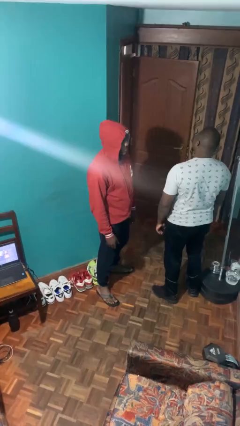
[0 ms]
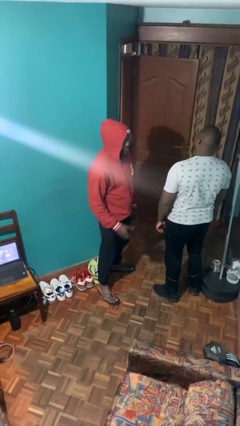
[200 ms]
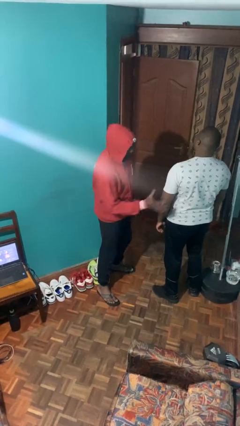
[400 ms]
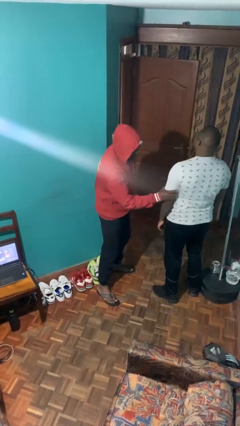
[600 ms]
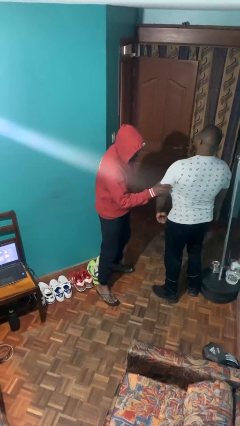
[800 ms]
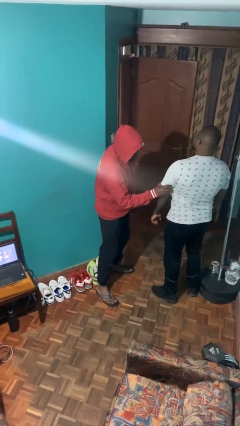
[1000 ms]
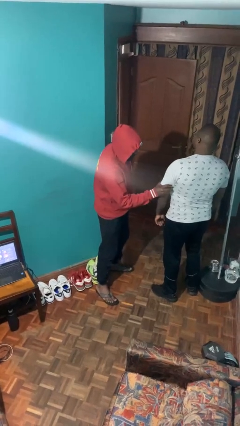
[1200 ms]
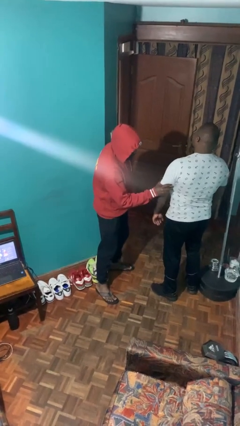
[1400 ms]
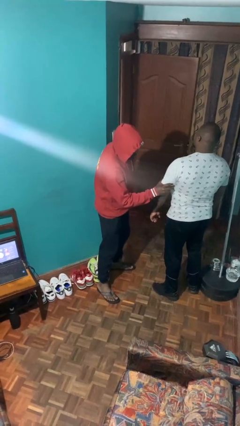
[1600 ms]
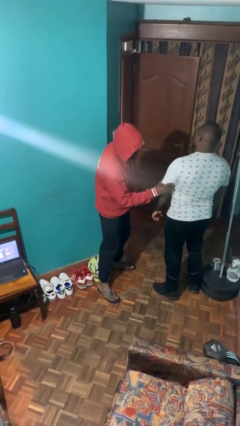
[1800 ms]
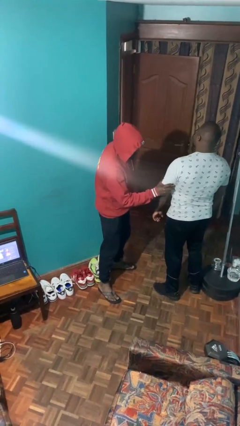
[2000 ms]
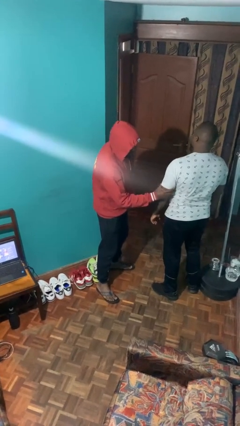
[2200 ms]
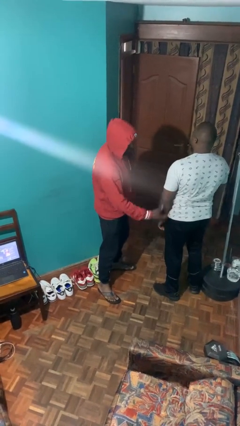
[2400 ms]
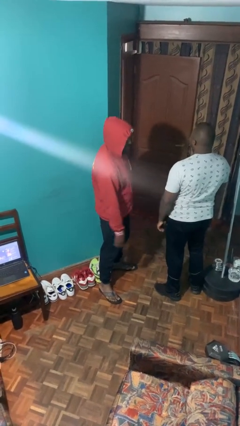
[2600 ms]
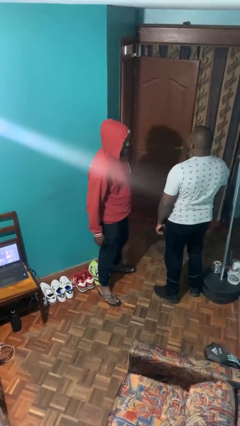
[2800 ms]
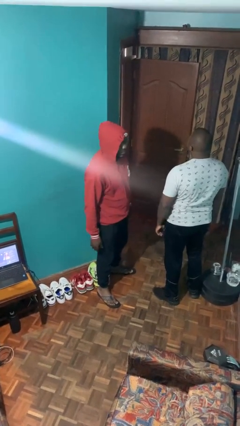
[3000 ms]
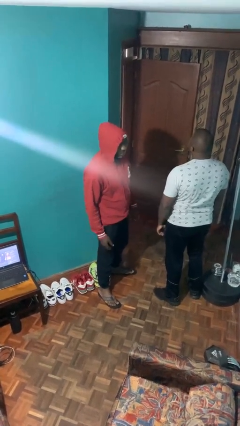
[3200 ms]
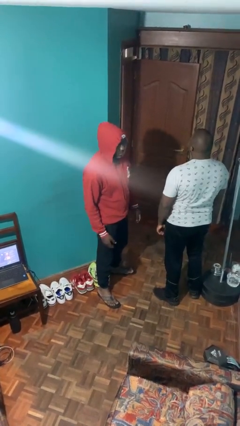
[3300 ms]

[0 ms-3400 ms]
person grabs person by bicep

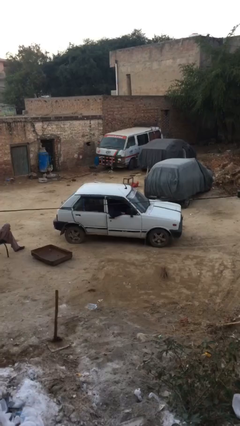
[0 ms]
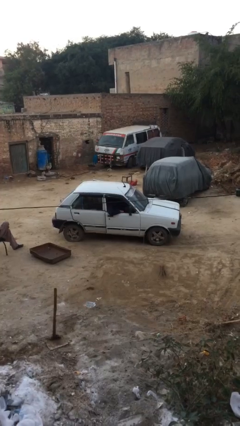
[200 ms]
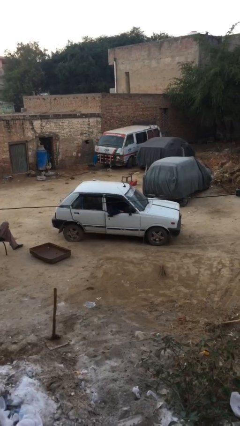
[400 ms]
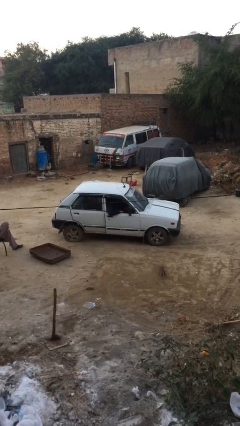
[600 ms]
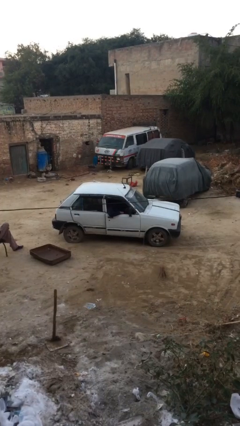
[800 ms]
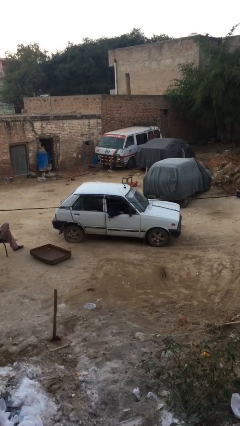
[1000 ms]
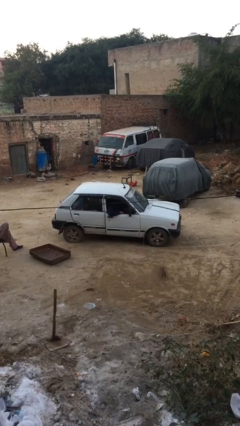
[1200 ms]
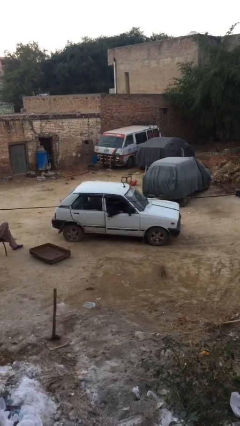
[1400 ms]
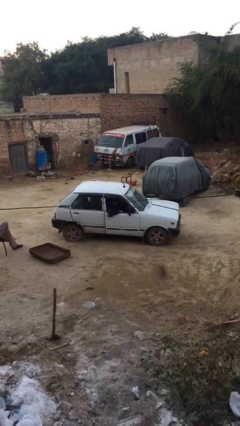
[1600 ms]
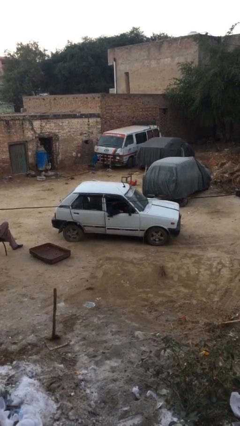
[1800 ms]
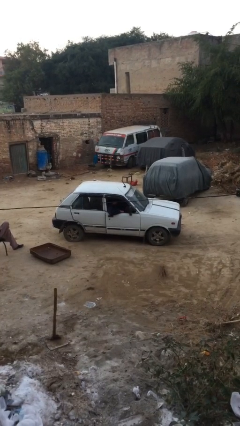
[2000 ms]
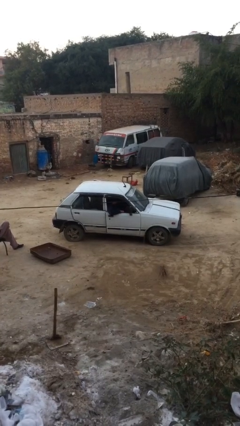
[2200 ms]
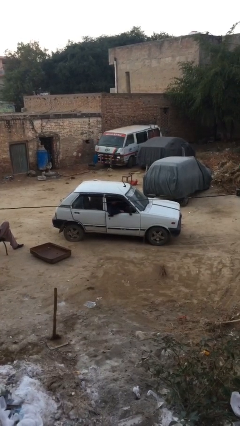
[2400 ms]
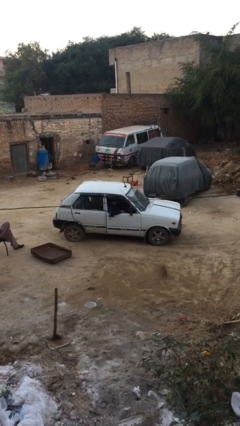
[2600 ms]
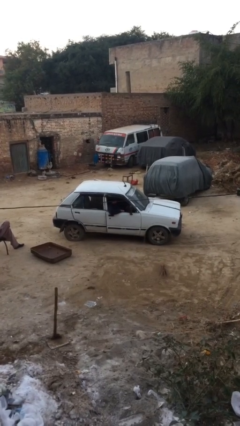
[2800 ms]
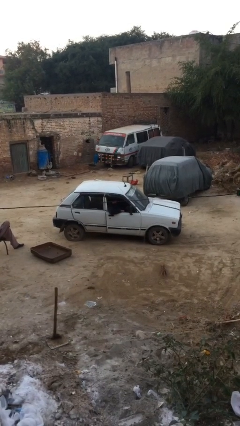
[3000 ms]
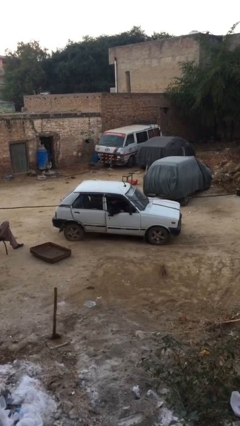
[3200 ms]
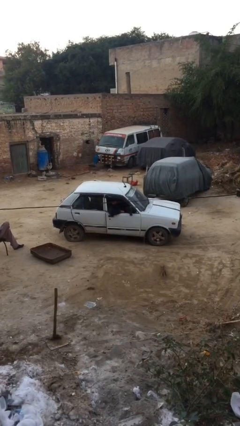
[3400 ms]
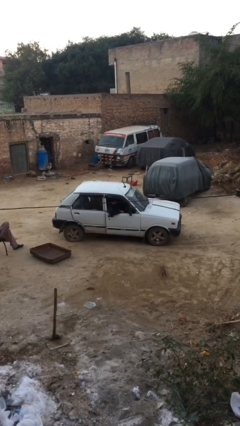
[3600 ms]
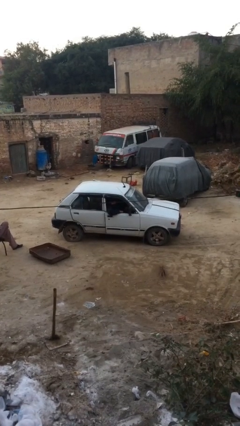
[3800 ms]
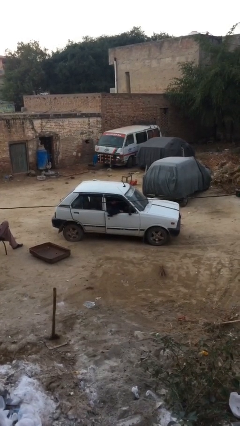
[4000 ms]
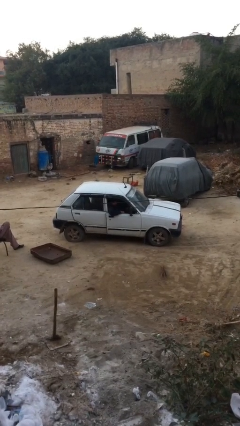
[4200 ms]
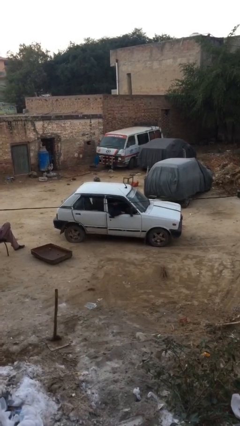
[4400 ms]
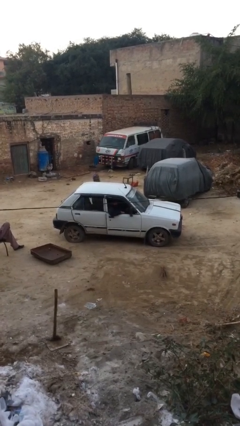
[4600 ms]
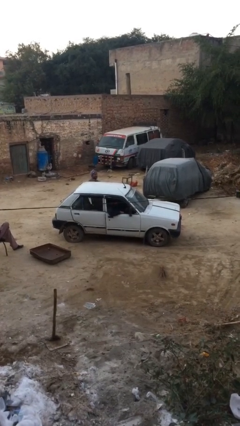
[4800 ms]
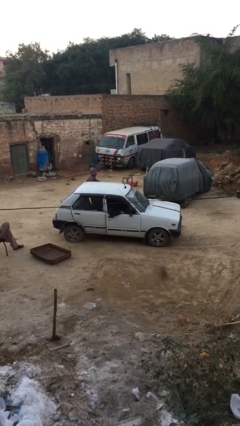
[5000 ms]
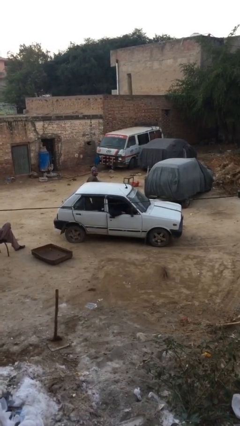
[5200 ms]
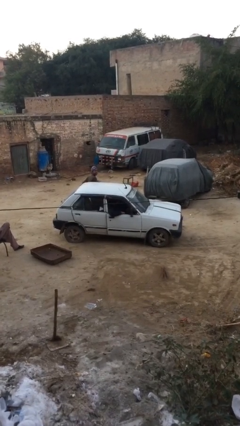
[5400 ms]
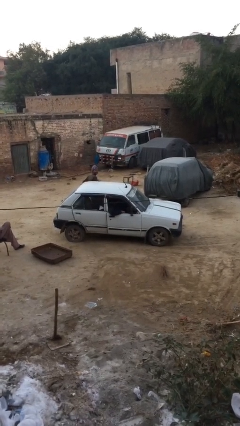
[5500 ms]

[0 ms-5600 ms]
car drops off person

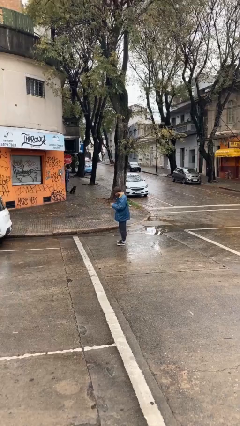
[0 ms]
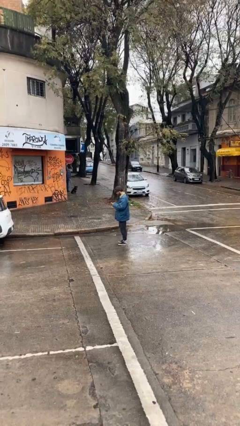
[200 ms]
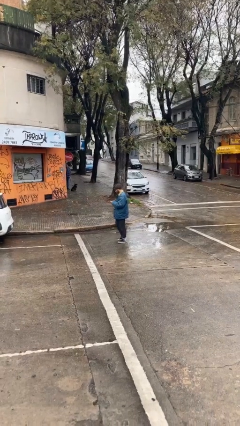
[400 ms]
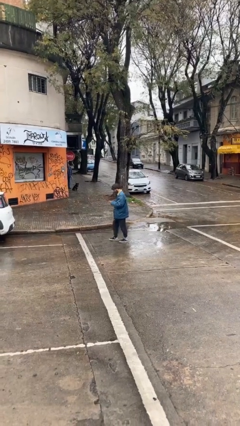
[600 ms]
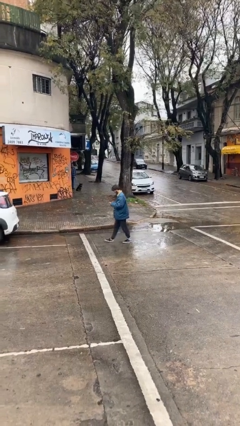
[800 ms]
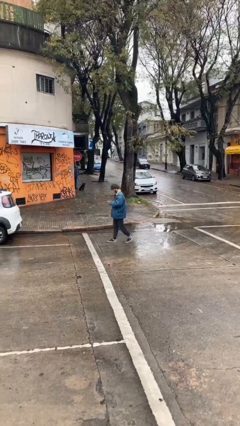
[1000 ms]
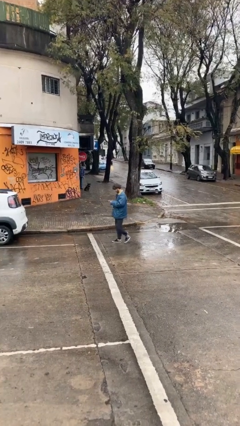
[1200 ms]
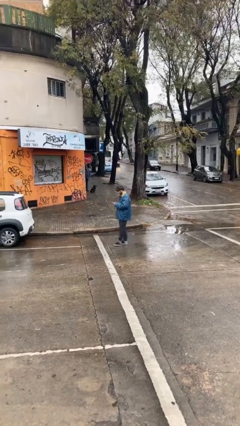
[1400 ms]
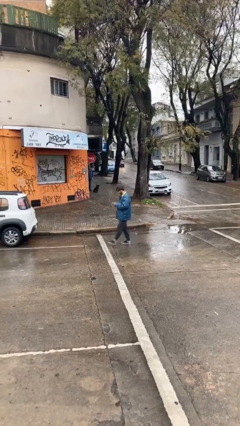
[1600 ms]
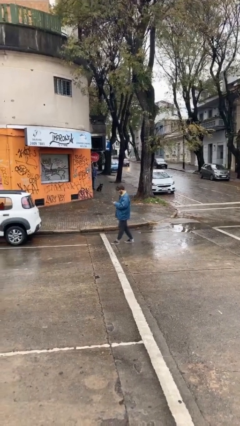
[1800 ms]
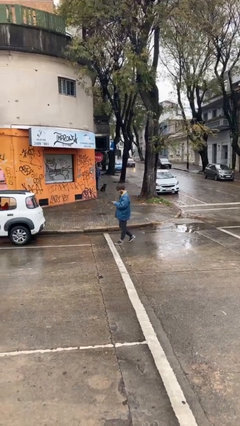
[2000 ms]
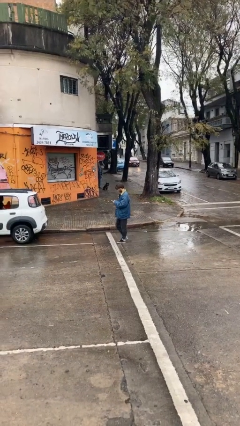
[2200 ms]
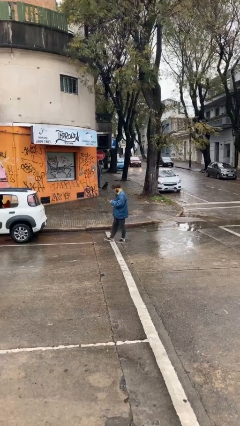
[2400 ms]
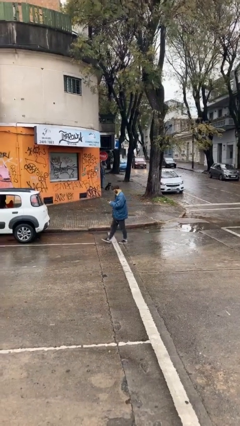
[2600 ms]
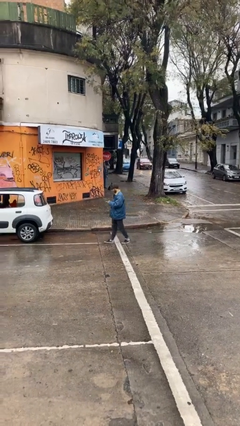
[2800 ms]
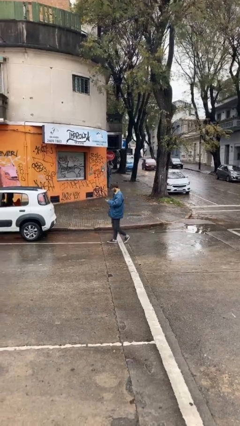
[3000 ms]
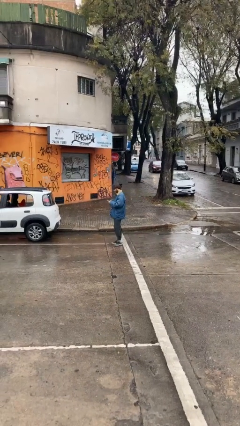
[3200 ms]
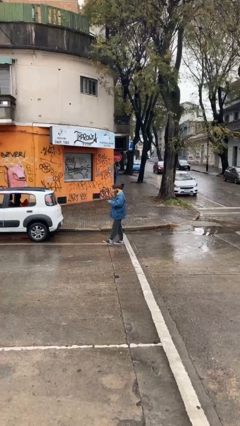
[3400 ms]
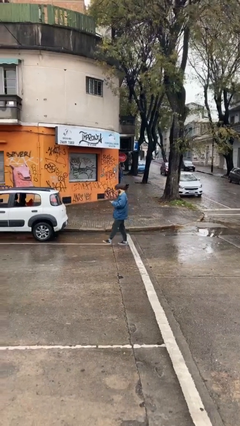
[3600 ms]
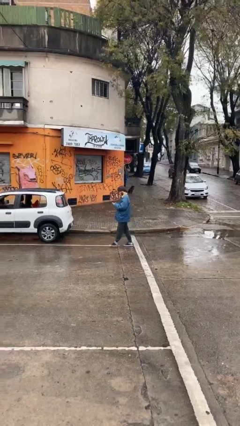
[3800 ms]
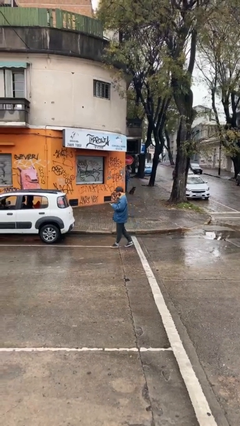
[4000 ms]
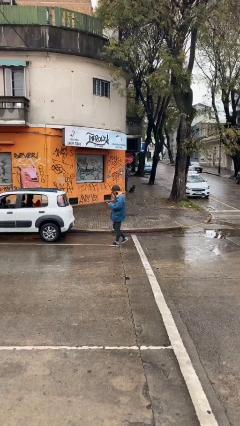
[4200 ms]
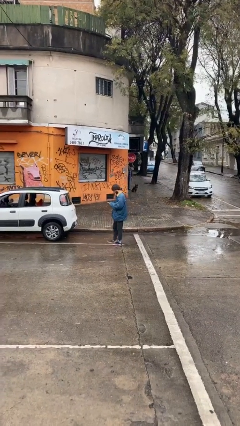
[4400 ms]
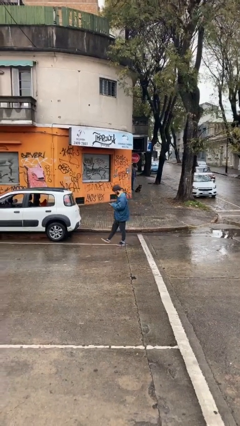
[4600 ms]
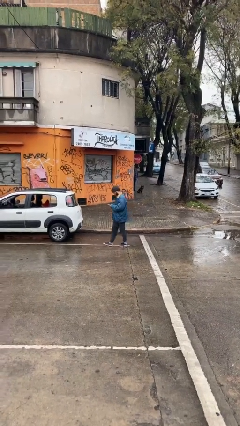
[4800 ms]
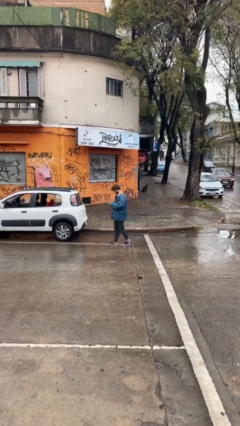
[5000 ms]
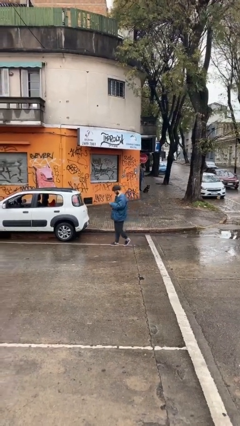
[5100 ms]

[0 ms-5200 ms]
person texts on phone

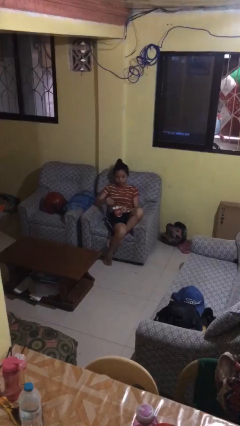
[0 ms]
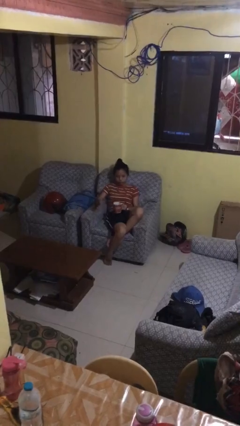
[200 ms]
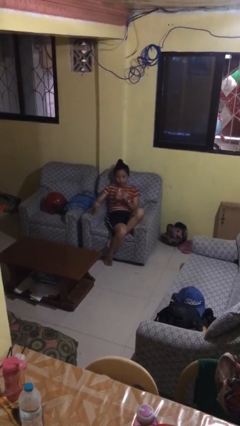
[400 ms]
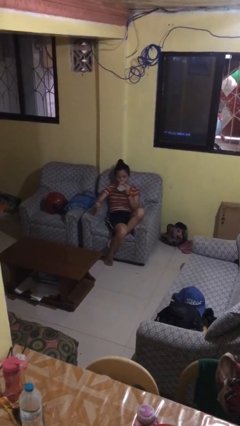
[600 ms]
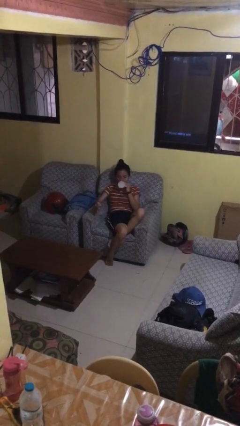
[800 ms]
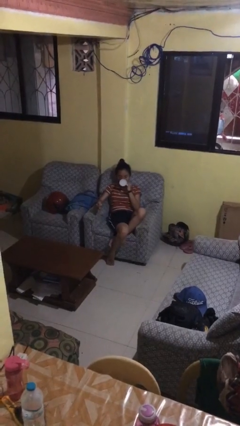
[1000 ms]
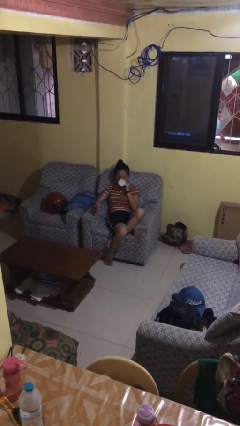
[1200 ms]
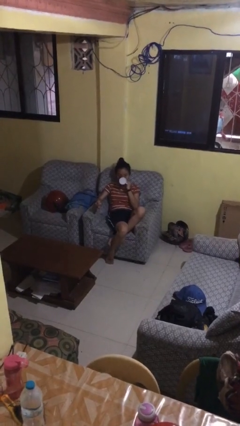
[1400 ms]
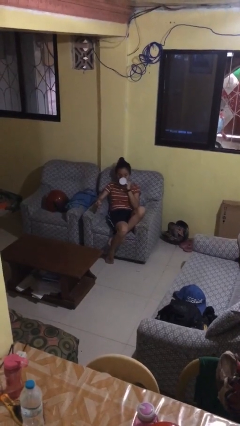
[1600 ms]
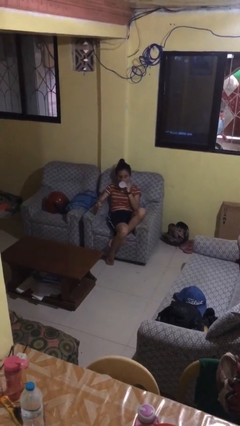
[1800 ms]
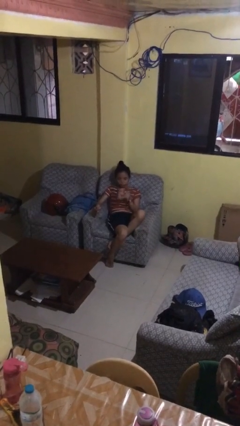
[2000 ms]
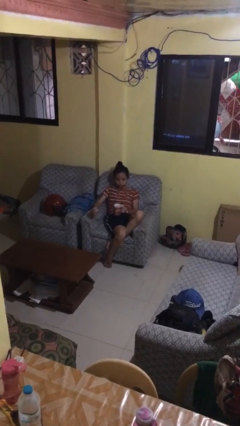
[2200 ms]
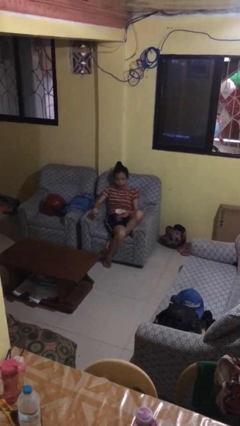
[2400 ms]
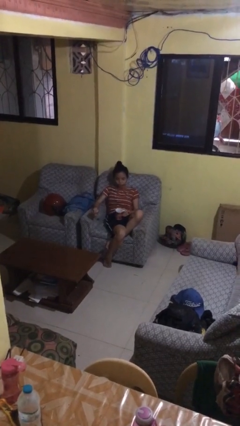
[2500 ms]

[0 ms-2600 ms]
person drinks from mug

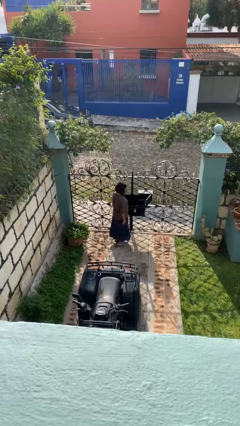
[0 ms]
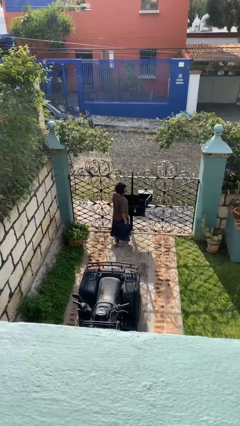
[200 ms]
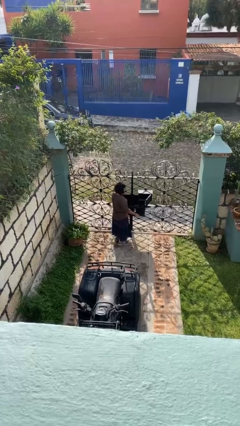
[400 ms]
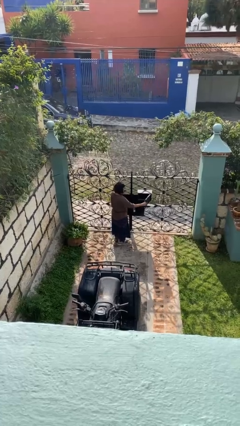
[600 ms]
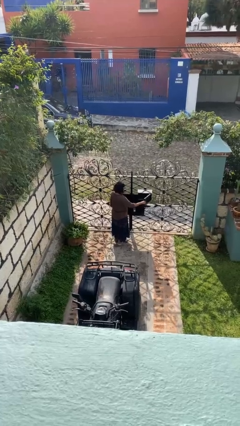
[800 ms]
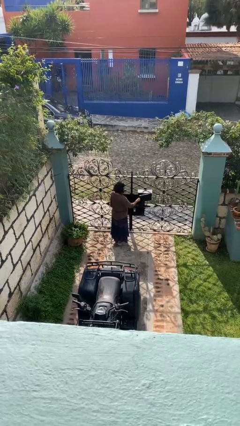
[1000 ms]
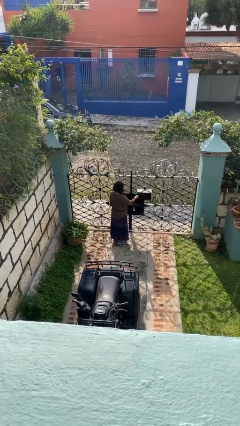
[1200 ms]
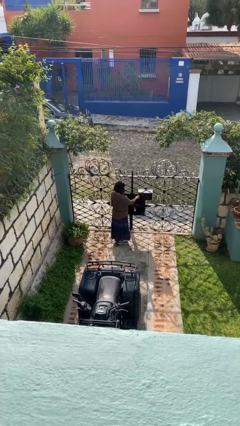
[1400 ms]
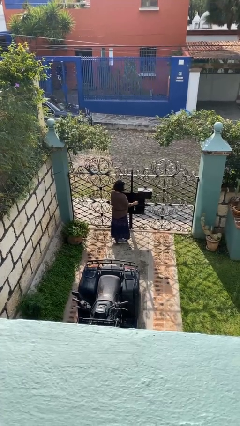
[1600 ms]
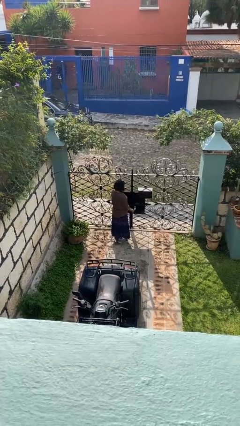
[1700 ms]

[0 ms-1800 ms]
person closes mailbox
